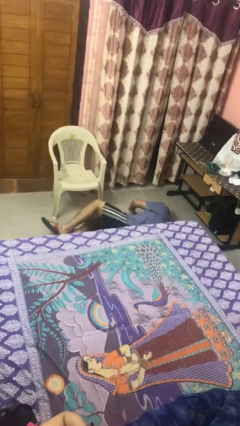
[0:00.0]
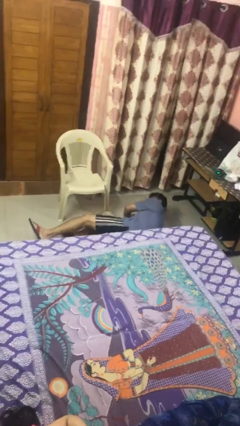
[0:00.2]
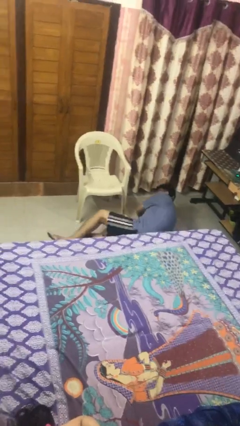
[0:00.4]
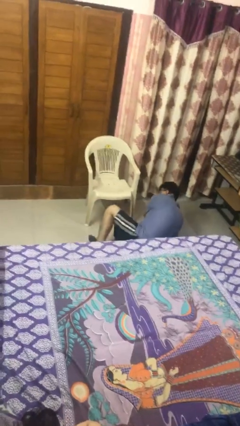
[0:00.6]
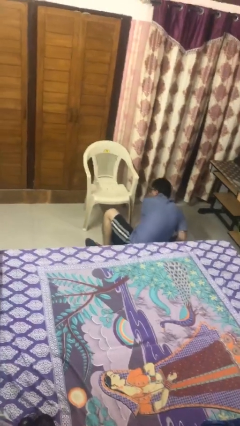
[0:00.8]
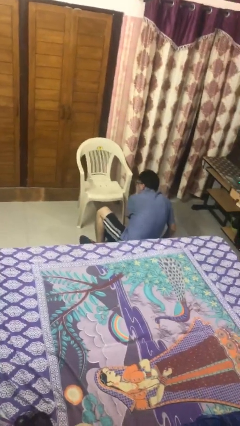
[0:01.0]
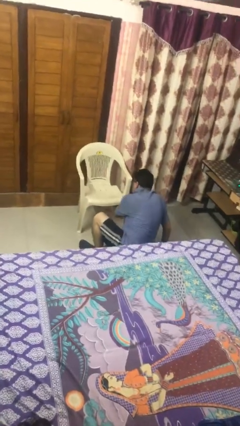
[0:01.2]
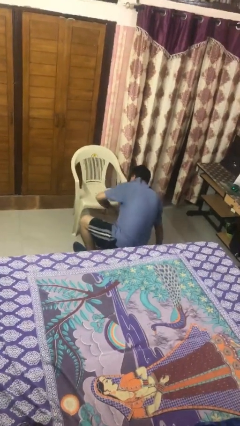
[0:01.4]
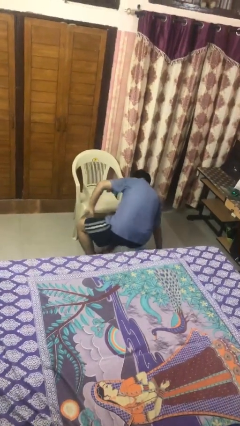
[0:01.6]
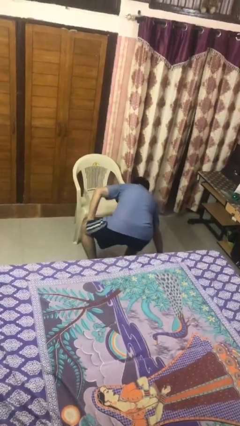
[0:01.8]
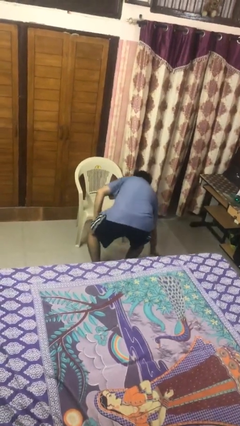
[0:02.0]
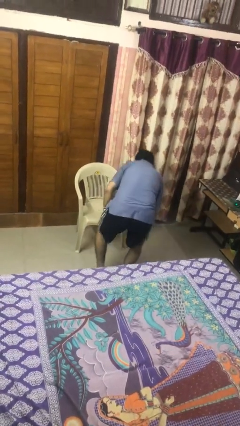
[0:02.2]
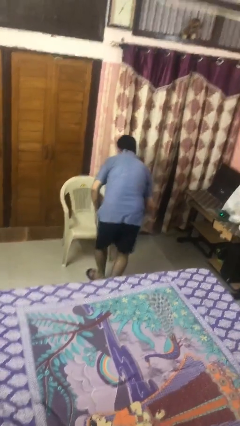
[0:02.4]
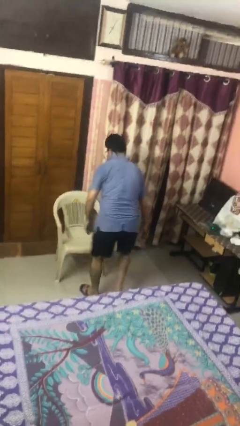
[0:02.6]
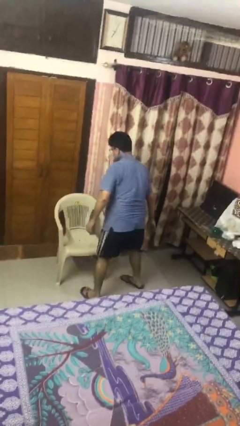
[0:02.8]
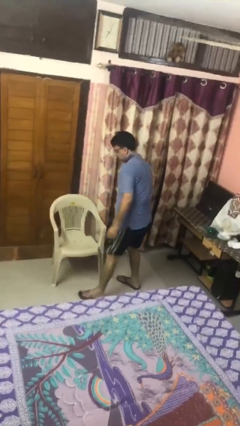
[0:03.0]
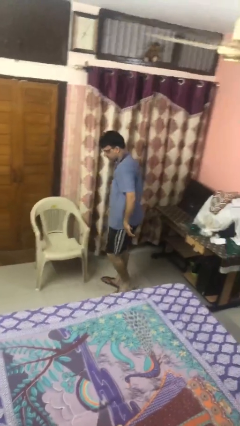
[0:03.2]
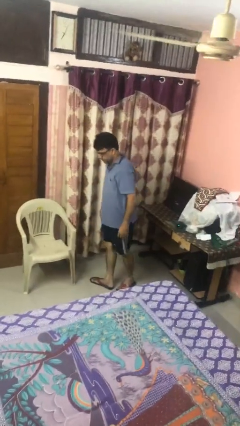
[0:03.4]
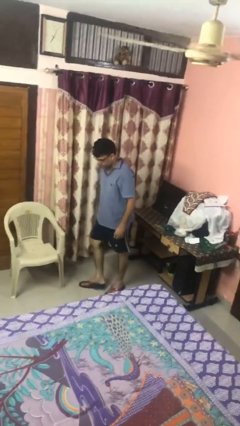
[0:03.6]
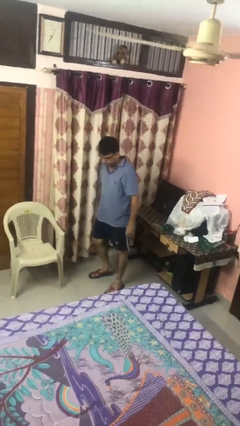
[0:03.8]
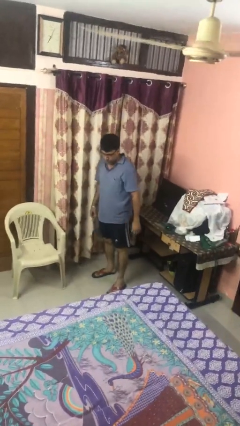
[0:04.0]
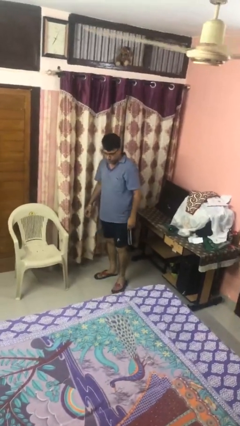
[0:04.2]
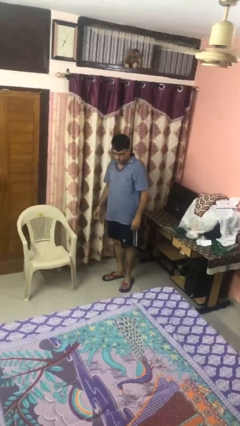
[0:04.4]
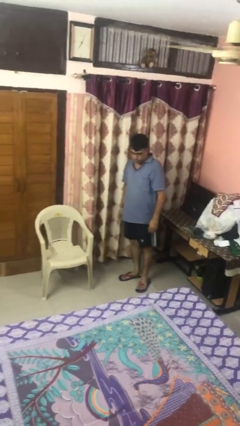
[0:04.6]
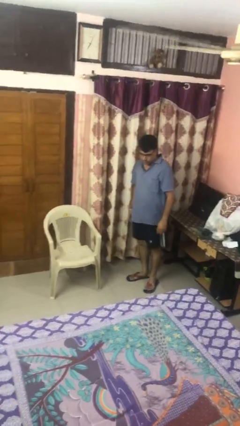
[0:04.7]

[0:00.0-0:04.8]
person stands up from floor

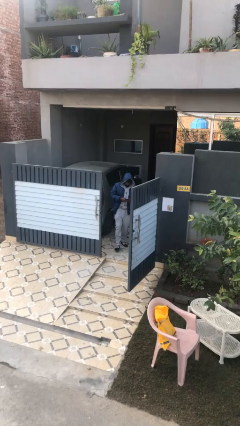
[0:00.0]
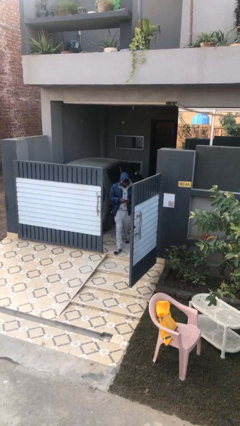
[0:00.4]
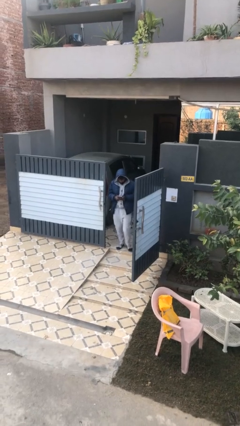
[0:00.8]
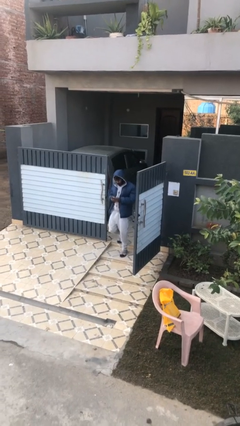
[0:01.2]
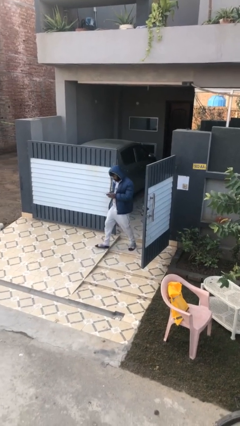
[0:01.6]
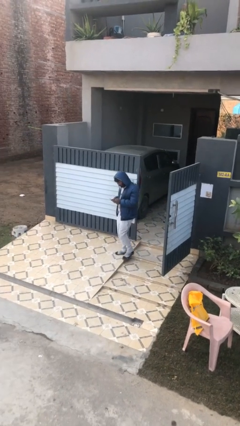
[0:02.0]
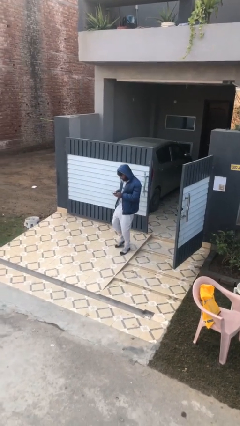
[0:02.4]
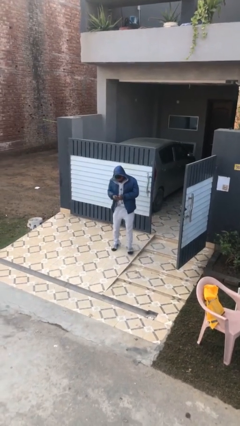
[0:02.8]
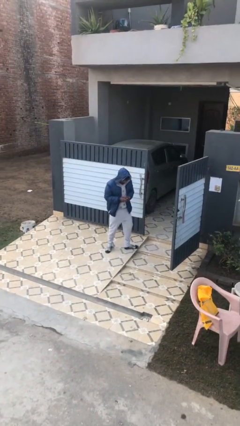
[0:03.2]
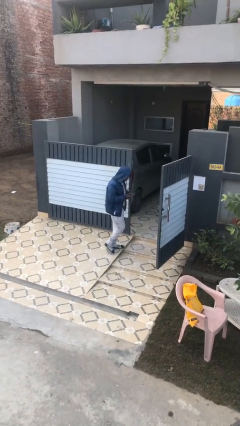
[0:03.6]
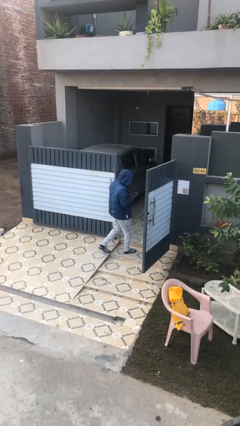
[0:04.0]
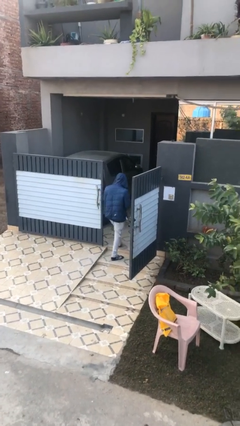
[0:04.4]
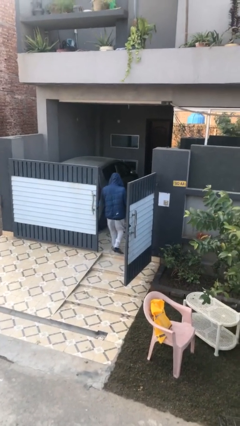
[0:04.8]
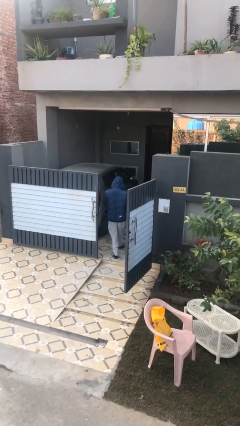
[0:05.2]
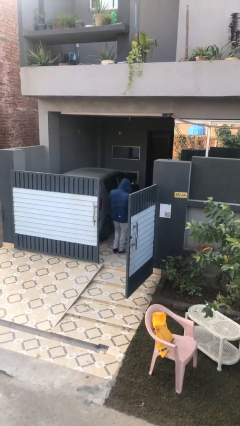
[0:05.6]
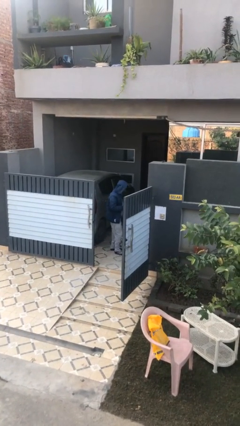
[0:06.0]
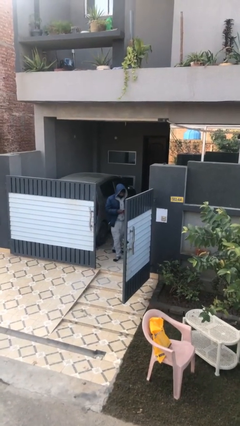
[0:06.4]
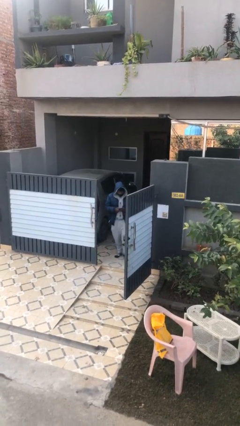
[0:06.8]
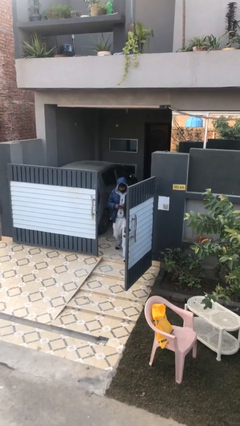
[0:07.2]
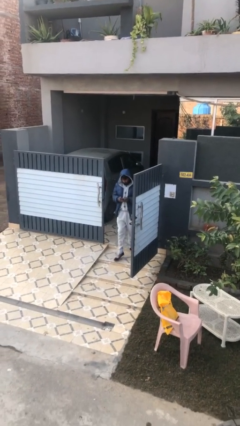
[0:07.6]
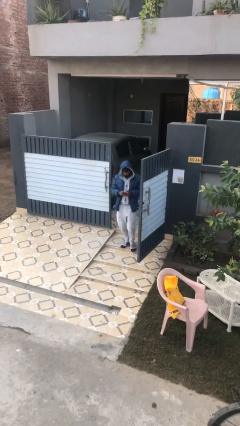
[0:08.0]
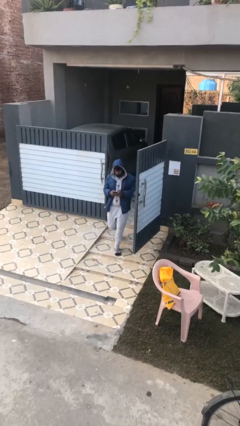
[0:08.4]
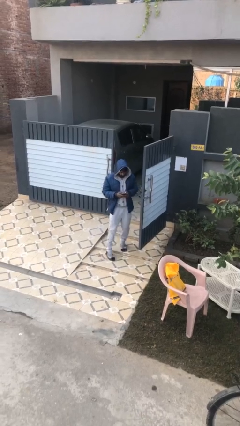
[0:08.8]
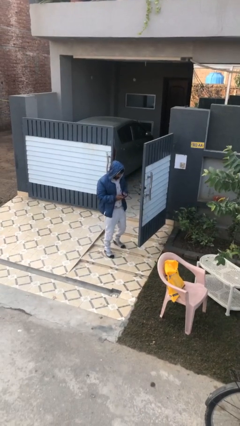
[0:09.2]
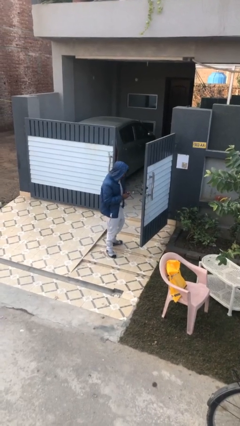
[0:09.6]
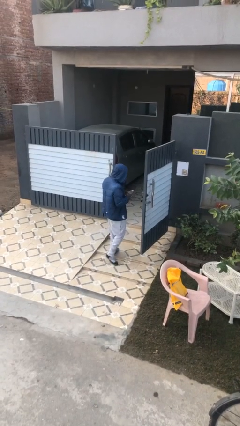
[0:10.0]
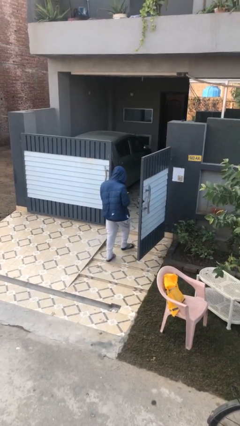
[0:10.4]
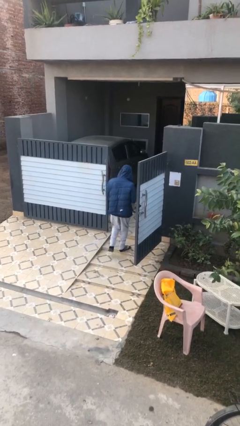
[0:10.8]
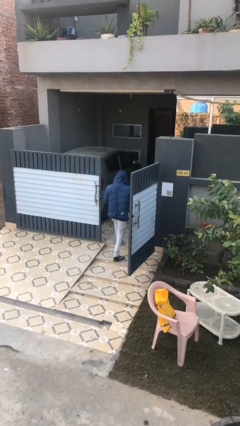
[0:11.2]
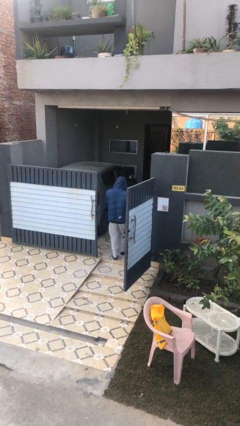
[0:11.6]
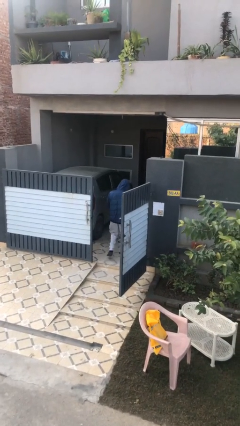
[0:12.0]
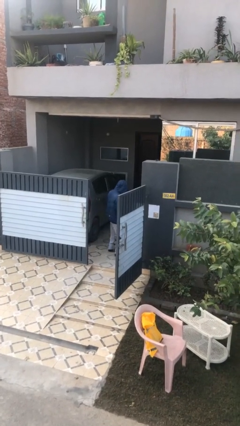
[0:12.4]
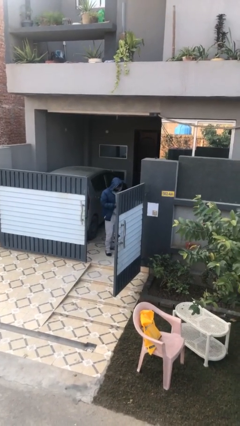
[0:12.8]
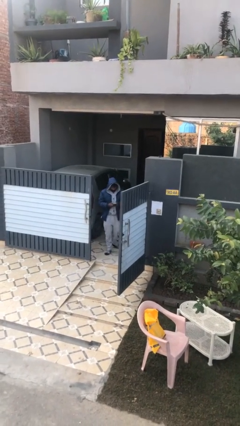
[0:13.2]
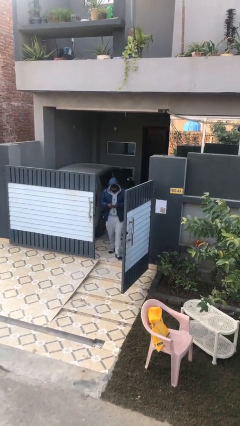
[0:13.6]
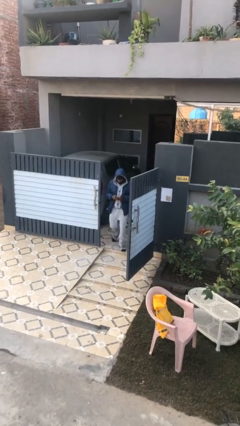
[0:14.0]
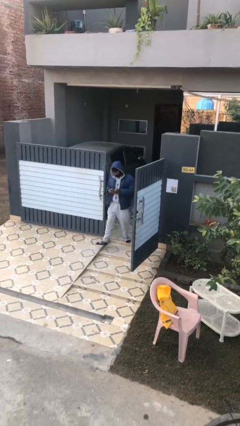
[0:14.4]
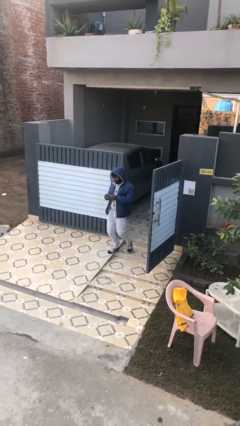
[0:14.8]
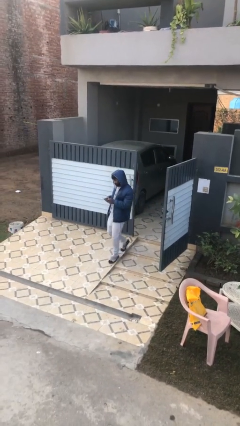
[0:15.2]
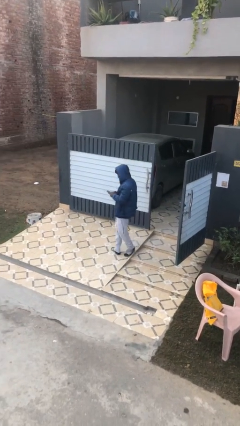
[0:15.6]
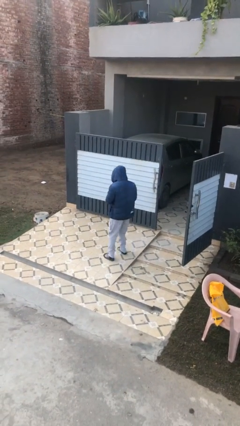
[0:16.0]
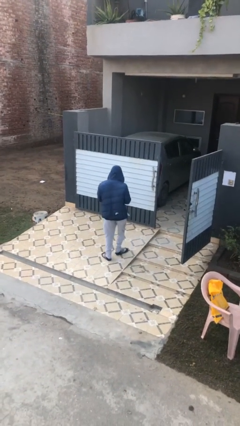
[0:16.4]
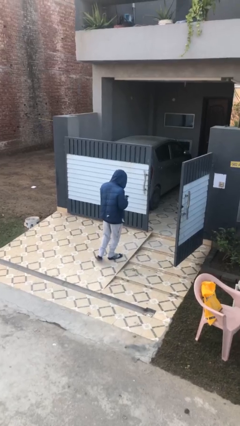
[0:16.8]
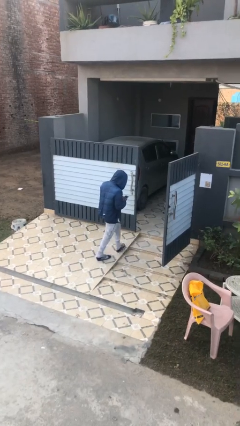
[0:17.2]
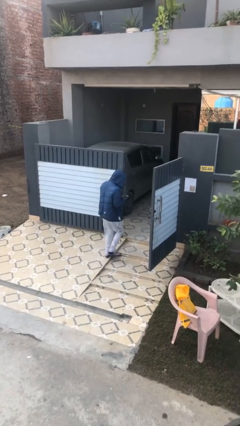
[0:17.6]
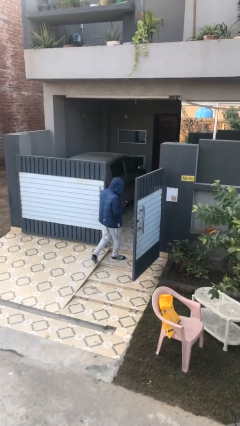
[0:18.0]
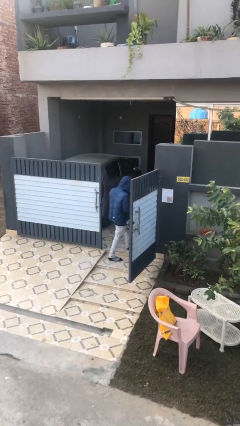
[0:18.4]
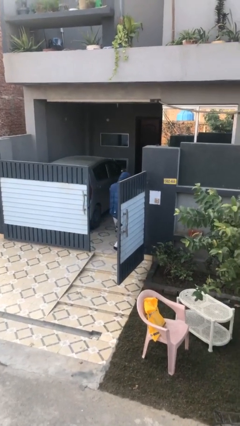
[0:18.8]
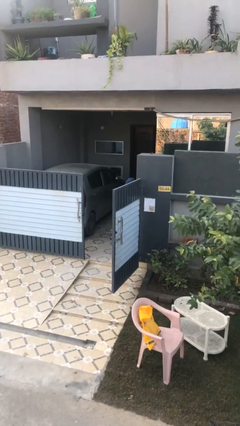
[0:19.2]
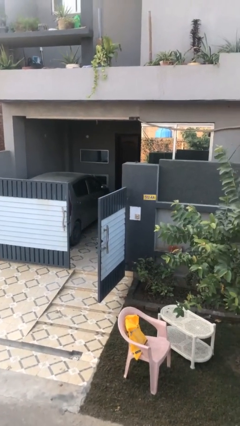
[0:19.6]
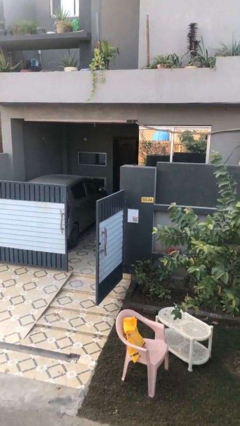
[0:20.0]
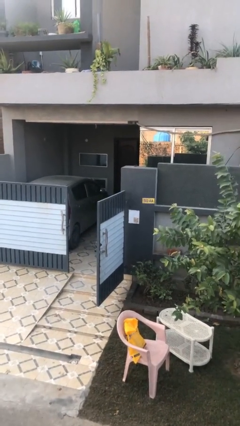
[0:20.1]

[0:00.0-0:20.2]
person texts on phone

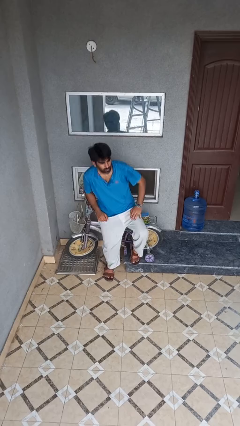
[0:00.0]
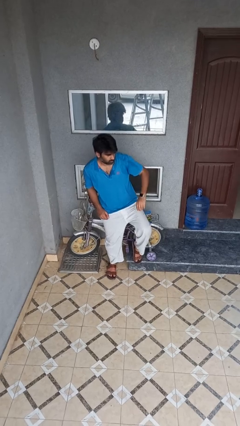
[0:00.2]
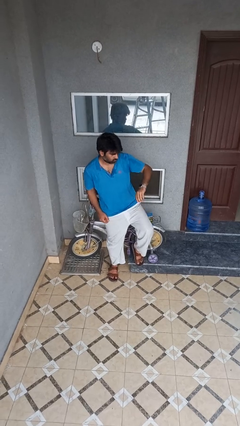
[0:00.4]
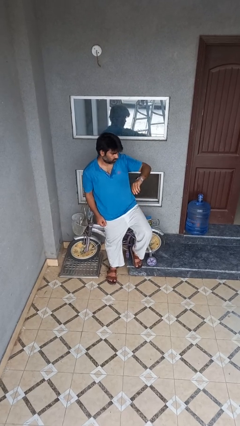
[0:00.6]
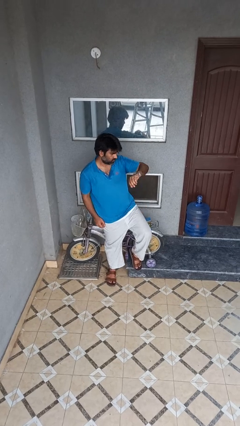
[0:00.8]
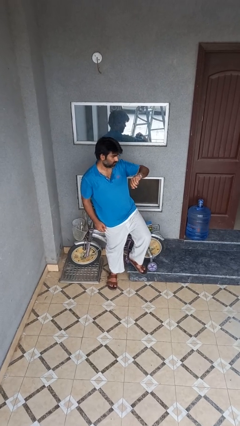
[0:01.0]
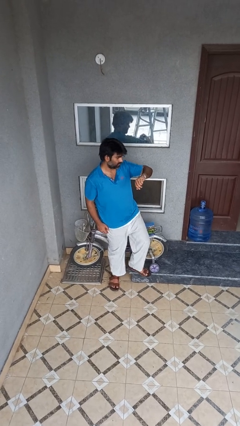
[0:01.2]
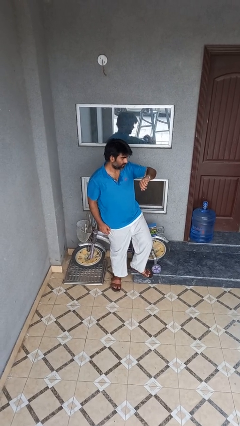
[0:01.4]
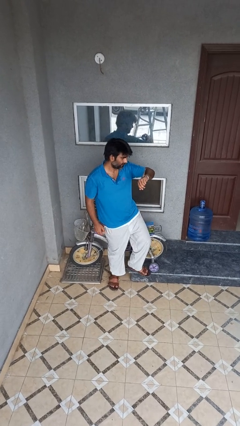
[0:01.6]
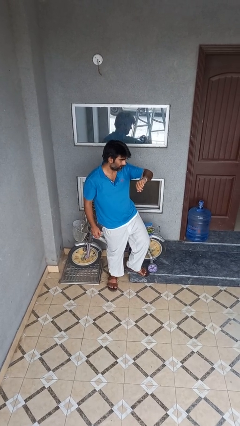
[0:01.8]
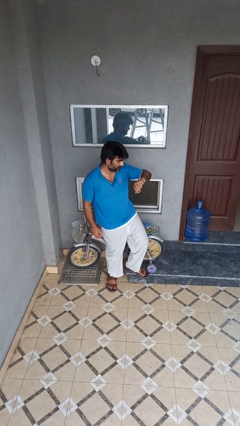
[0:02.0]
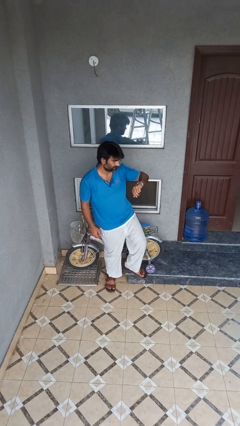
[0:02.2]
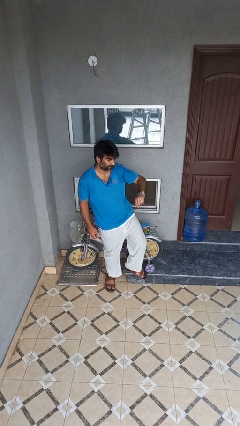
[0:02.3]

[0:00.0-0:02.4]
person looks at wristwatch

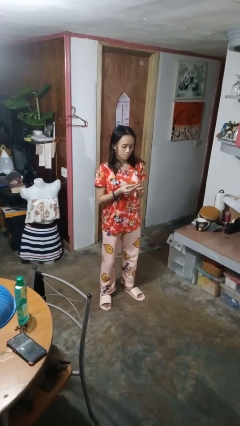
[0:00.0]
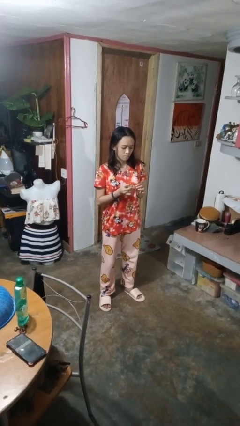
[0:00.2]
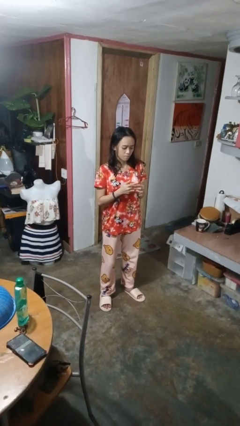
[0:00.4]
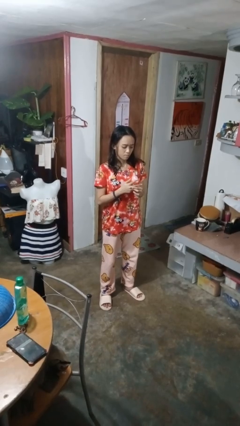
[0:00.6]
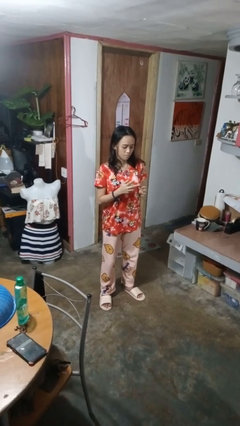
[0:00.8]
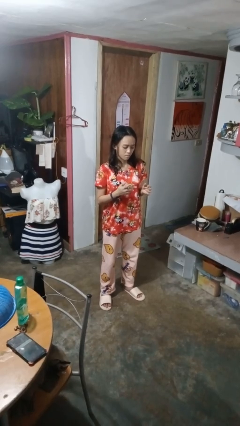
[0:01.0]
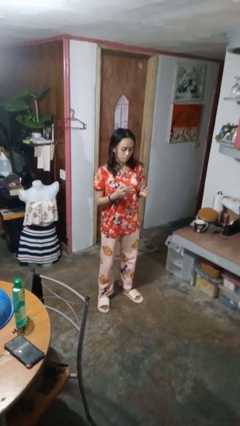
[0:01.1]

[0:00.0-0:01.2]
person puts on ring
